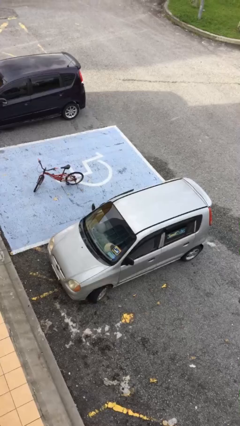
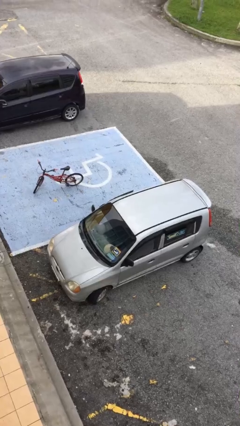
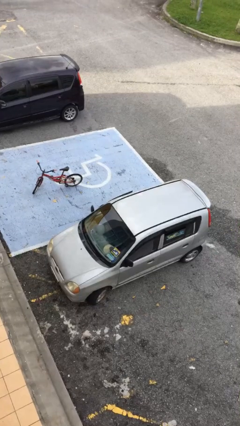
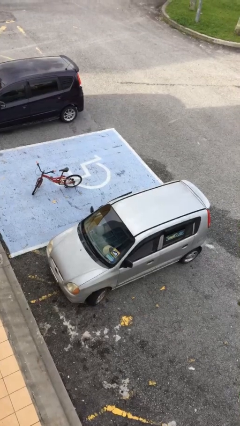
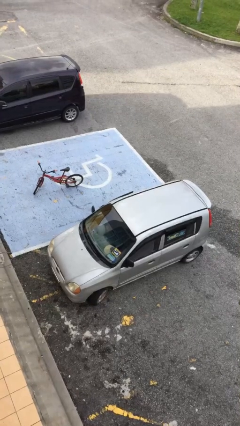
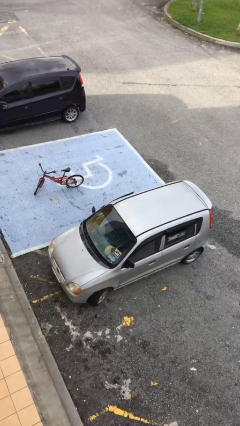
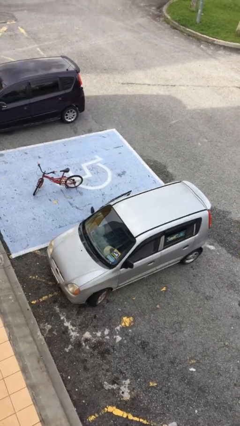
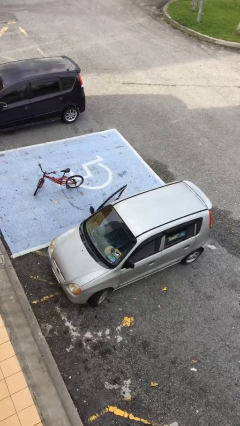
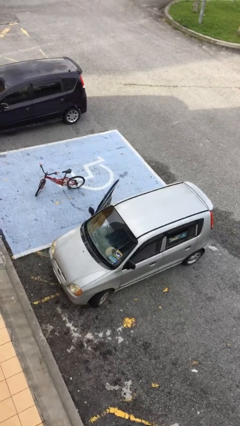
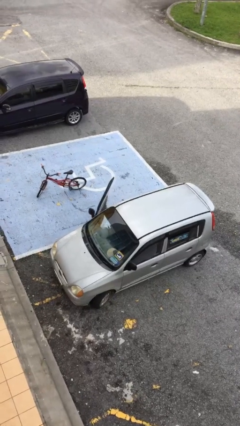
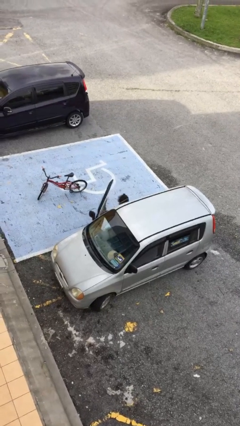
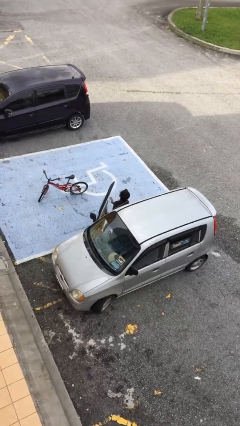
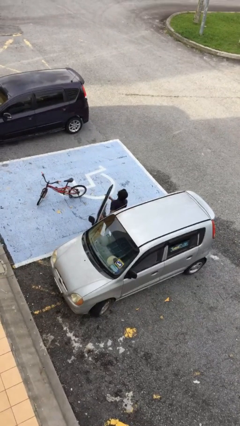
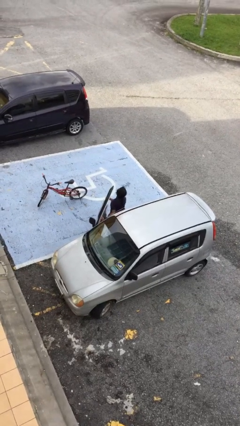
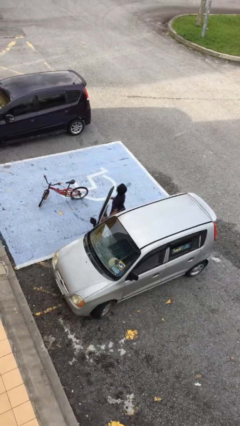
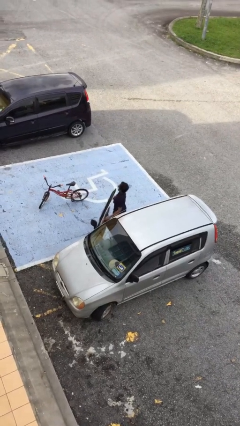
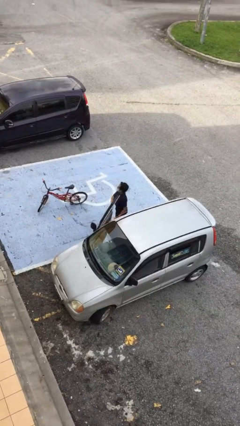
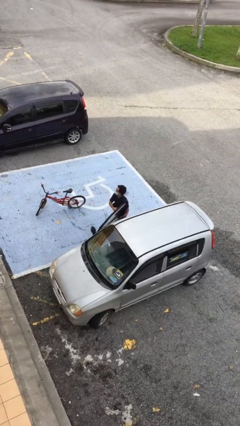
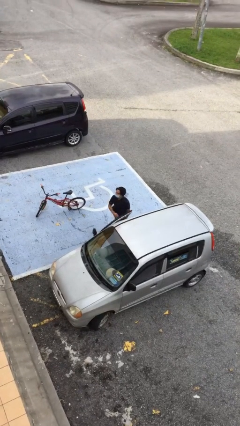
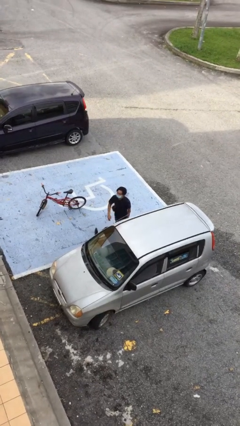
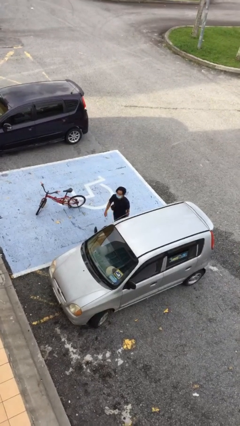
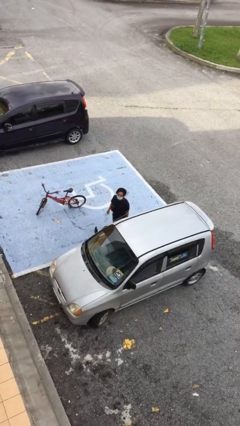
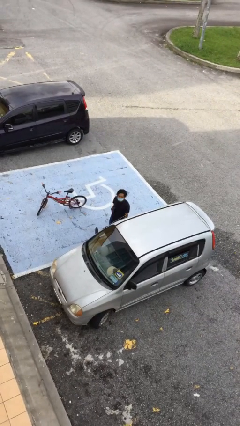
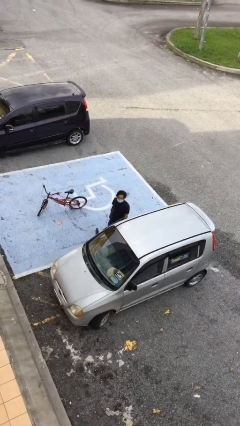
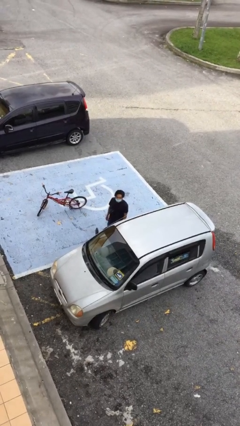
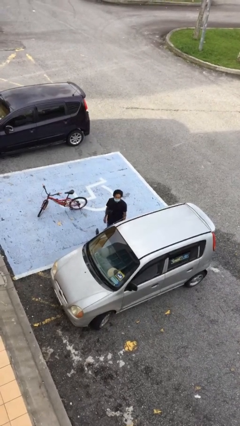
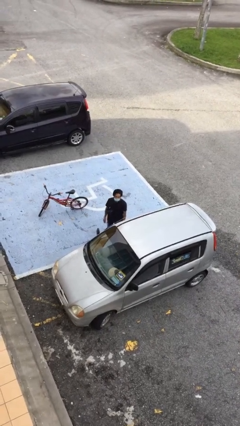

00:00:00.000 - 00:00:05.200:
person exits car

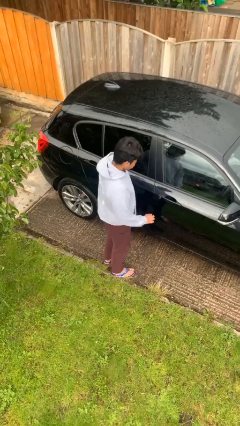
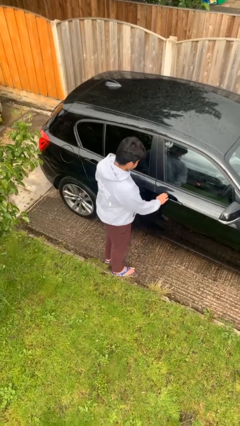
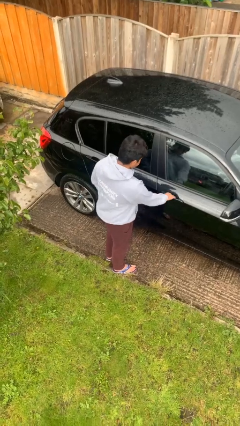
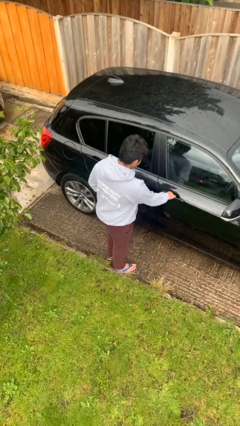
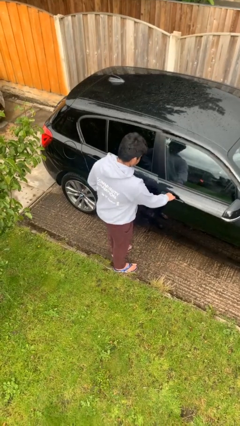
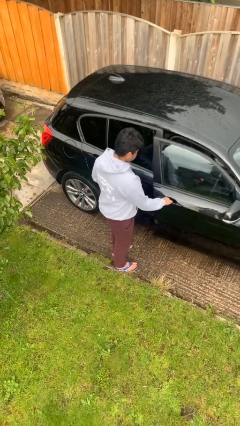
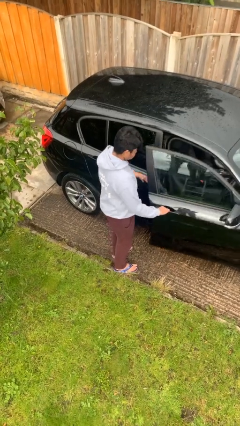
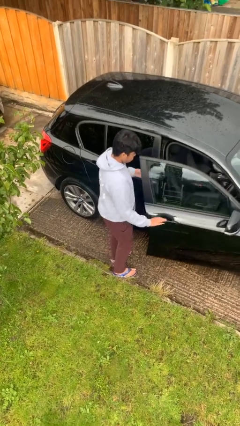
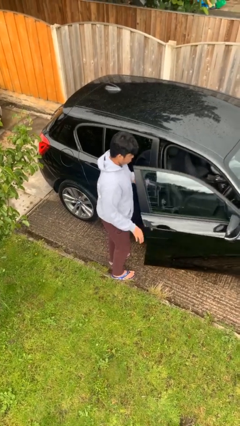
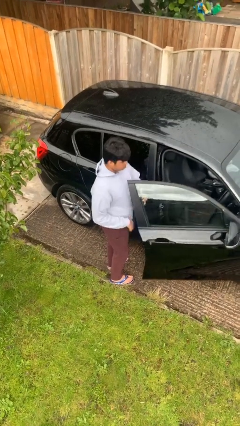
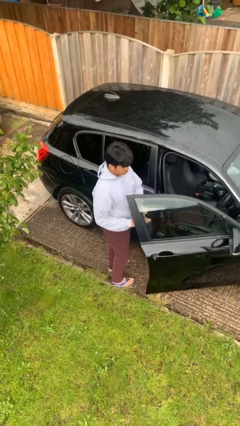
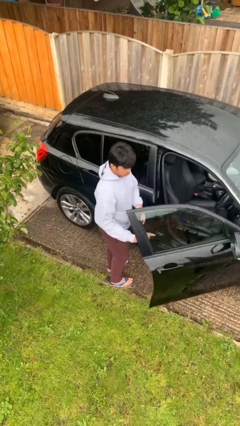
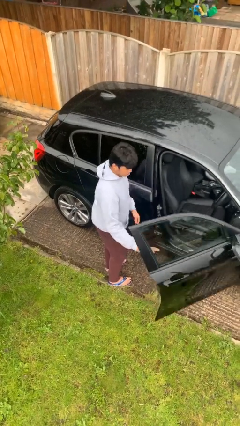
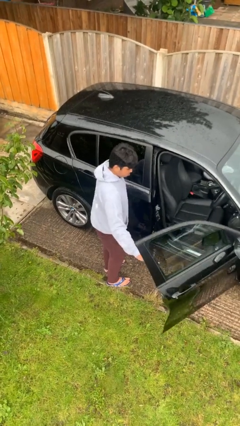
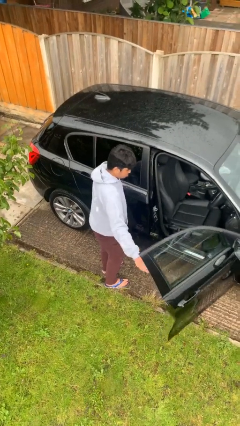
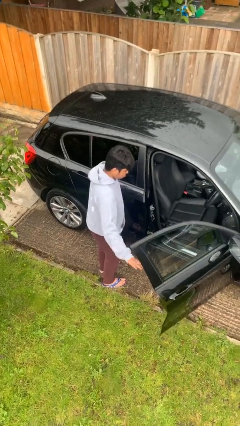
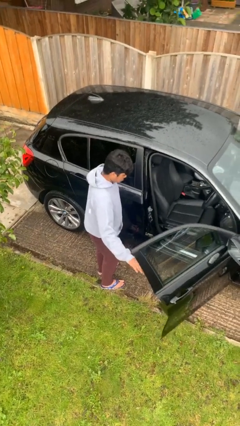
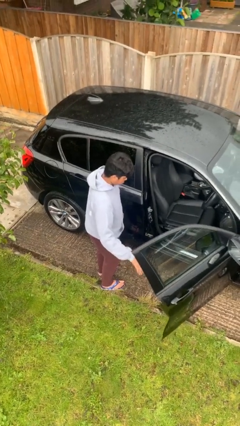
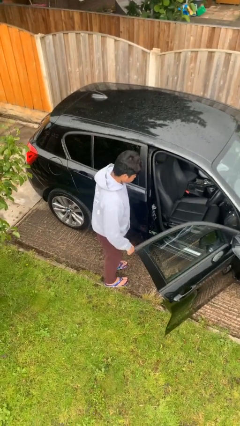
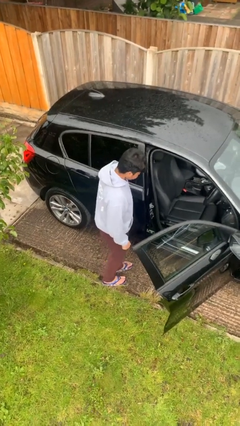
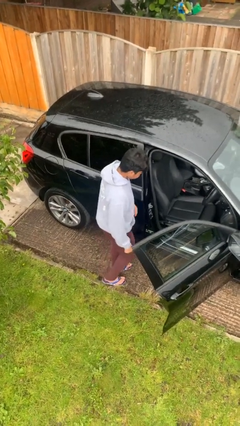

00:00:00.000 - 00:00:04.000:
person opens car door

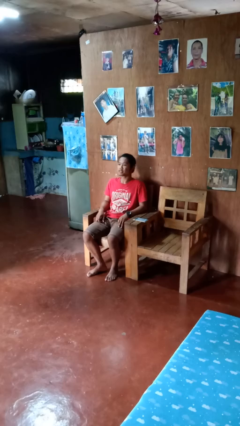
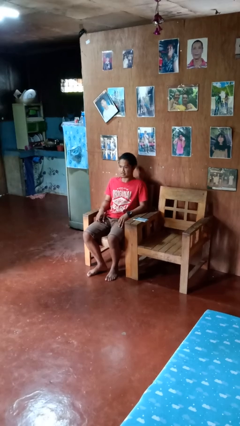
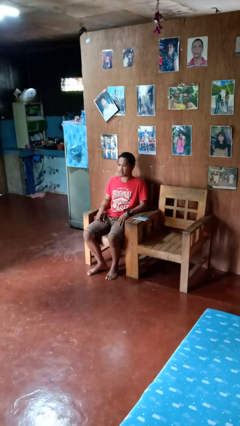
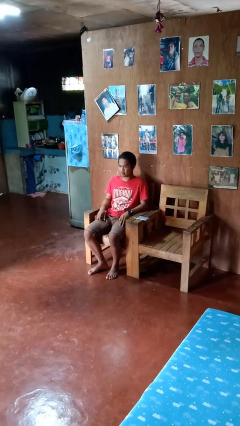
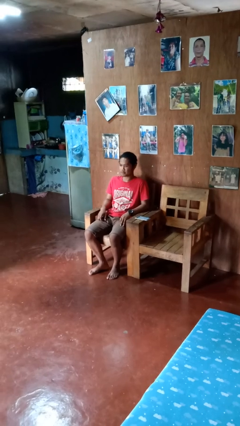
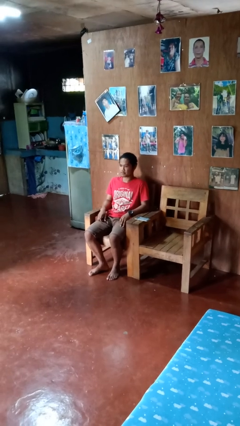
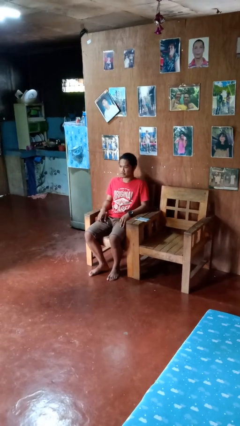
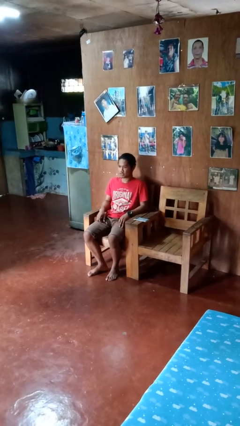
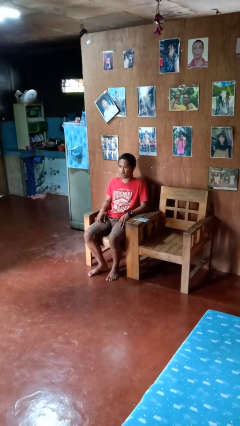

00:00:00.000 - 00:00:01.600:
person nods head

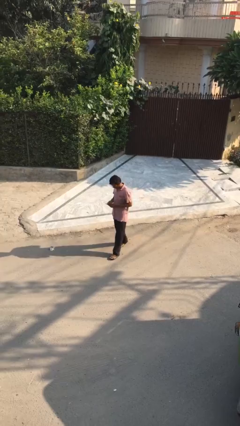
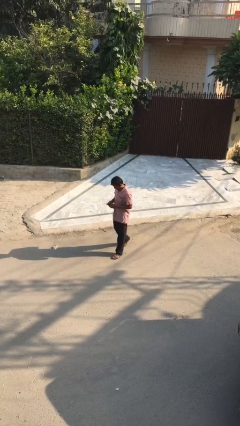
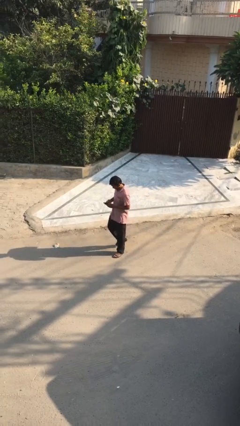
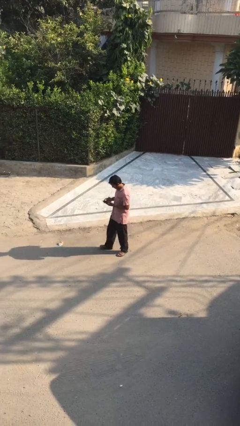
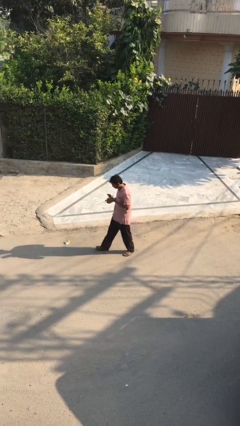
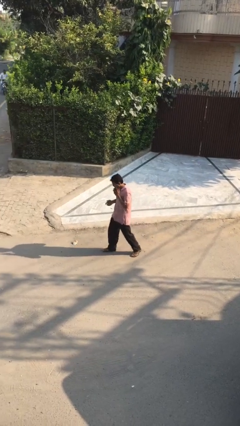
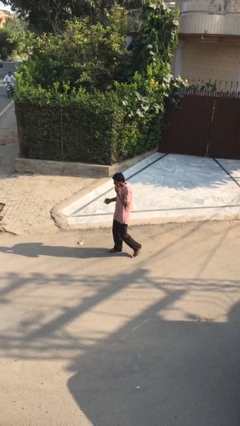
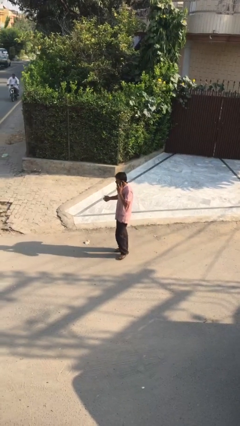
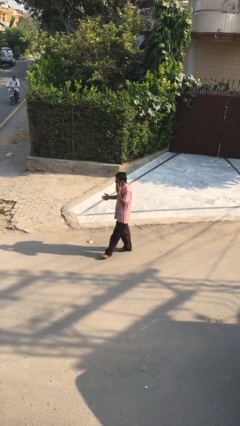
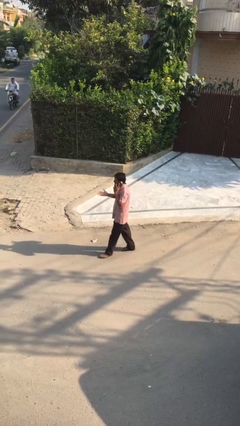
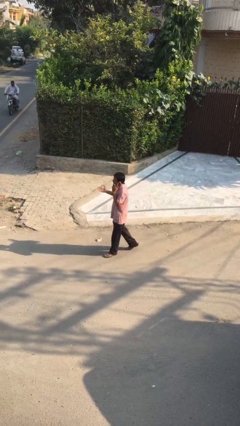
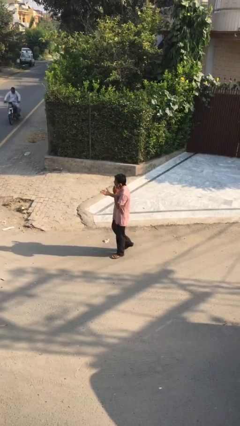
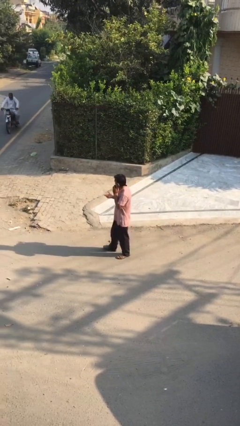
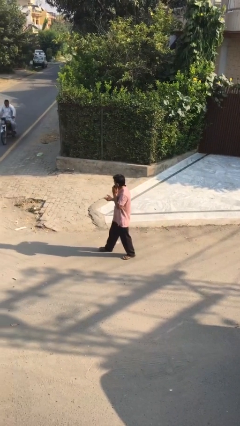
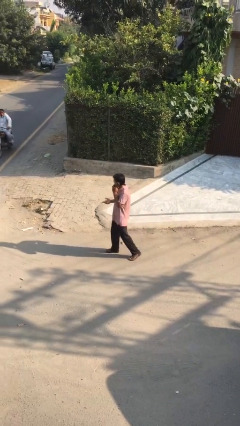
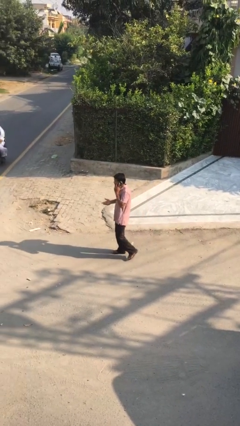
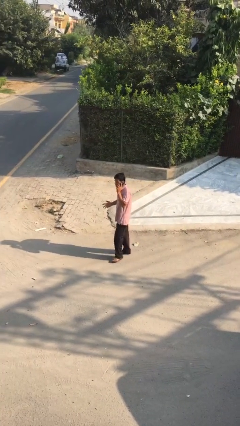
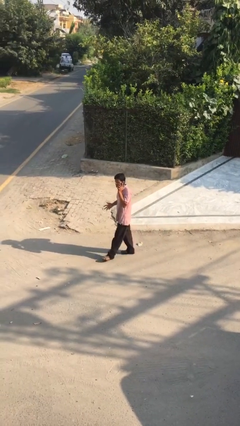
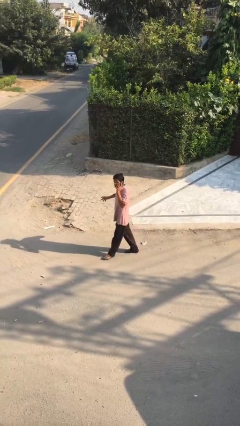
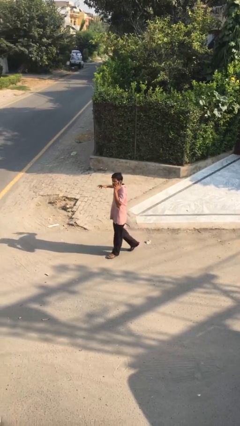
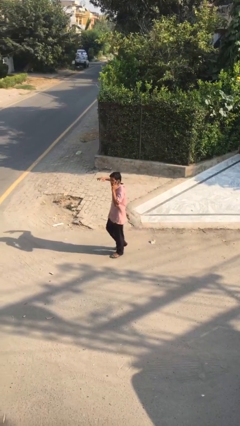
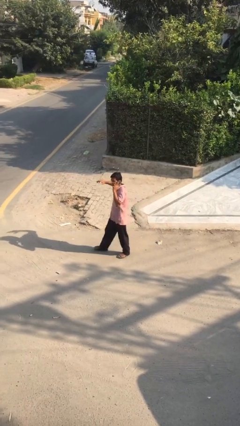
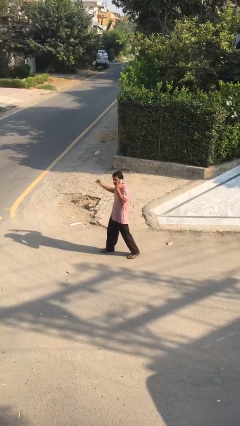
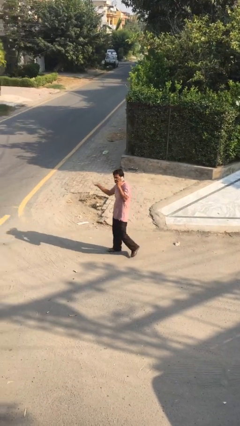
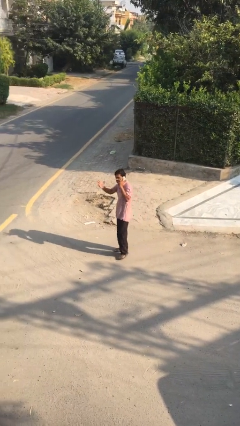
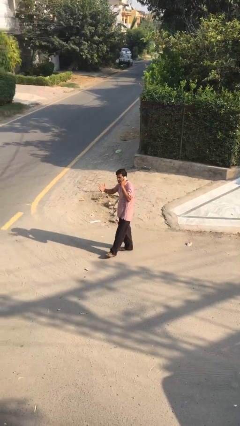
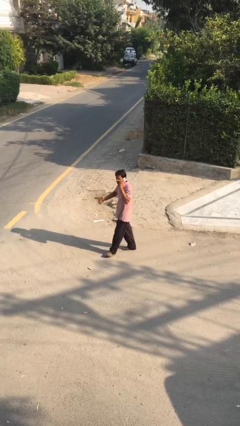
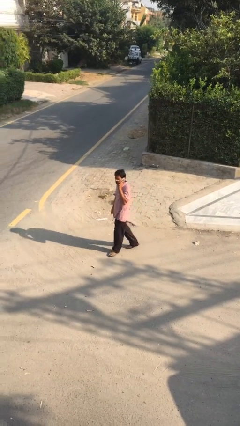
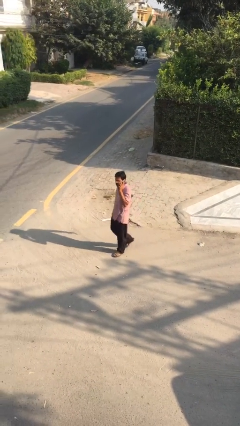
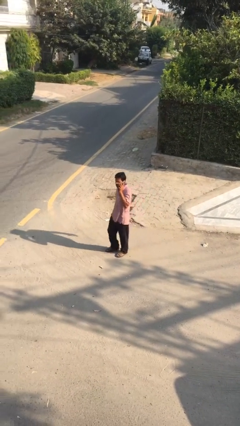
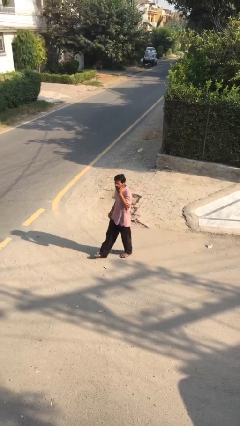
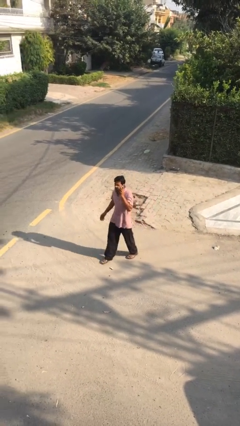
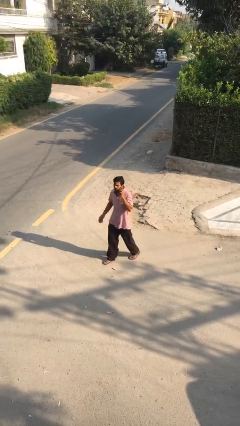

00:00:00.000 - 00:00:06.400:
person talks on phone

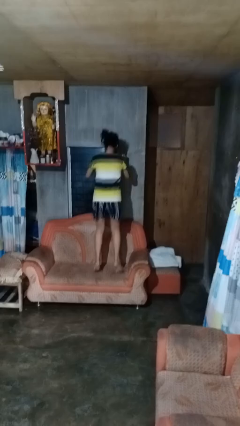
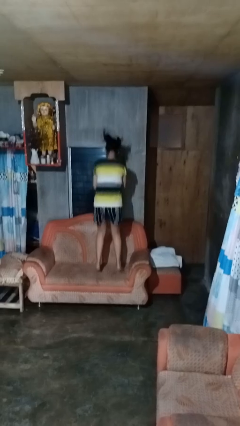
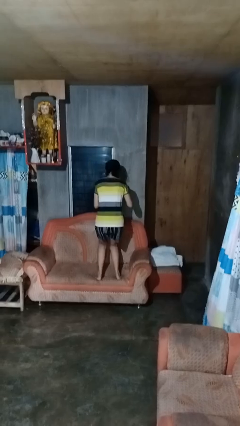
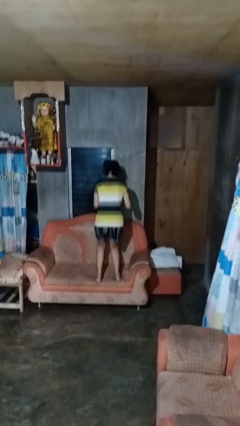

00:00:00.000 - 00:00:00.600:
person jumps on couch
